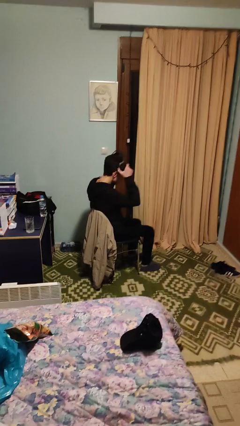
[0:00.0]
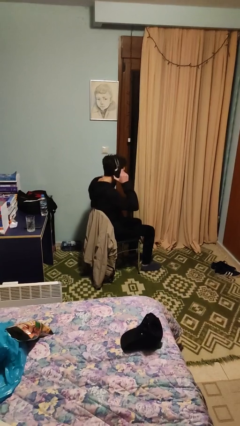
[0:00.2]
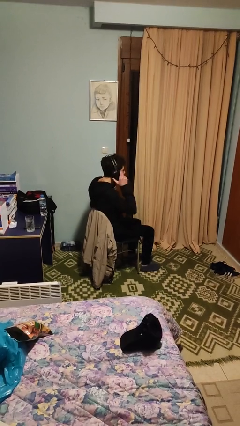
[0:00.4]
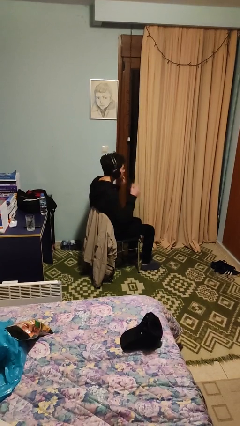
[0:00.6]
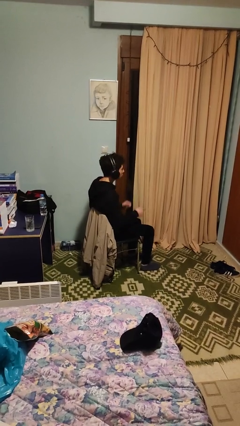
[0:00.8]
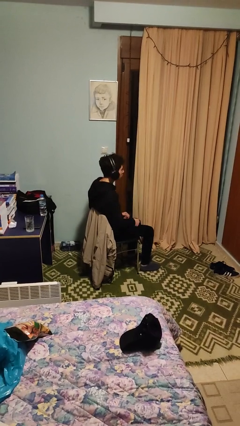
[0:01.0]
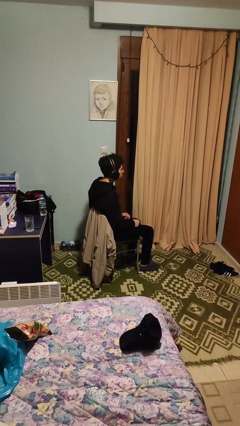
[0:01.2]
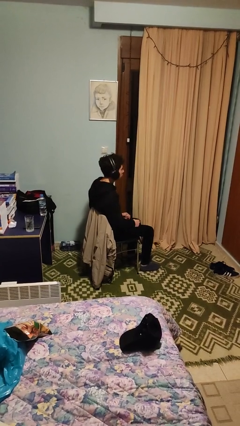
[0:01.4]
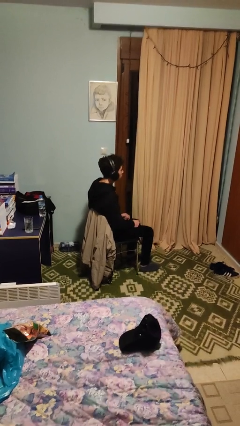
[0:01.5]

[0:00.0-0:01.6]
person puts on headphones

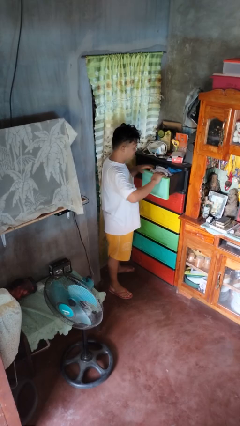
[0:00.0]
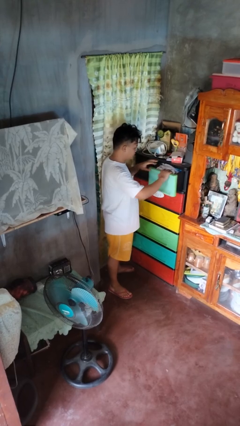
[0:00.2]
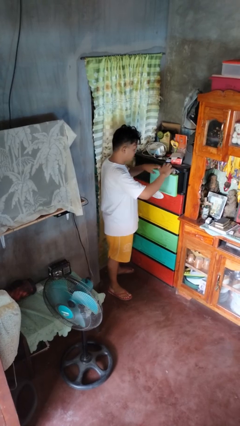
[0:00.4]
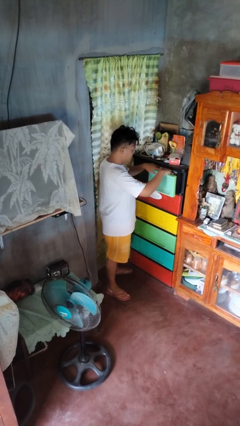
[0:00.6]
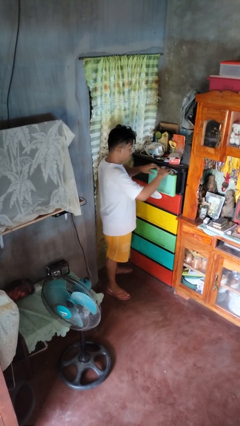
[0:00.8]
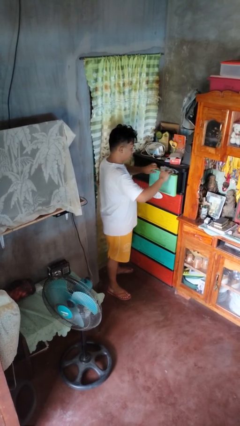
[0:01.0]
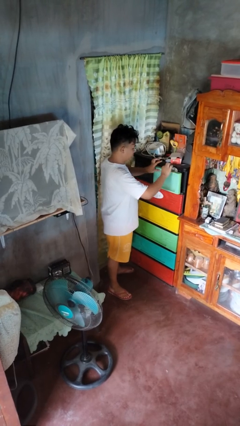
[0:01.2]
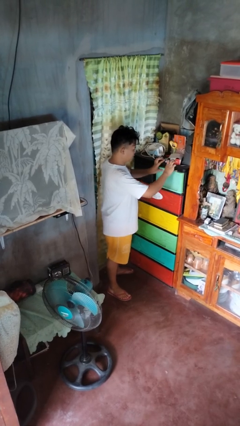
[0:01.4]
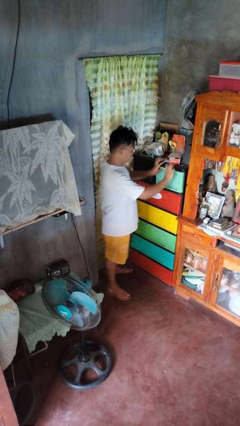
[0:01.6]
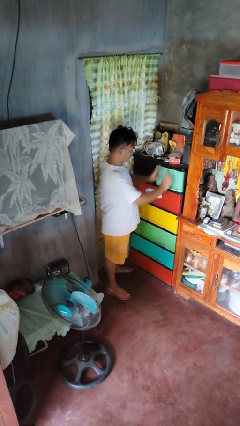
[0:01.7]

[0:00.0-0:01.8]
person closes dresser drawer

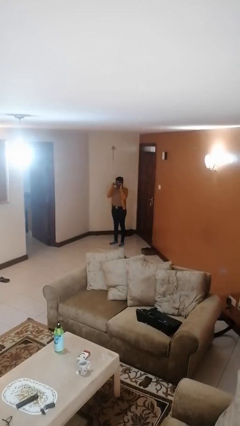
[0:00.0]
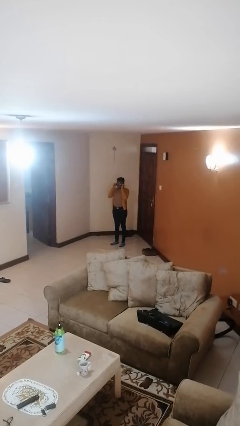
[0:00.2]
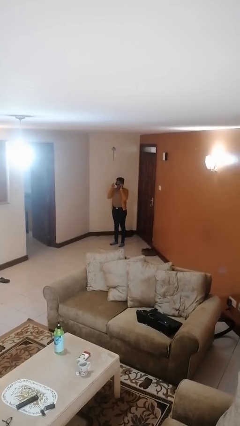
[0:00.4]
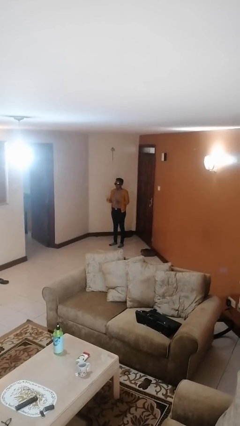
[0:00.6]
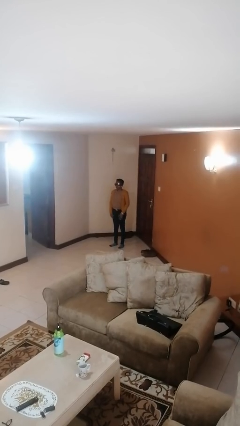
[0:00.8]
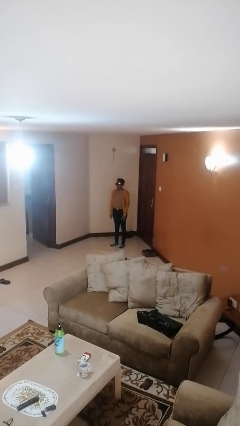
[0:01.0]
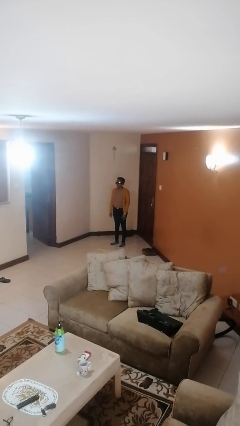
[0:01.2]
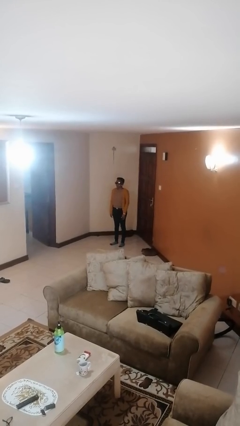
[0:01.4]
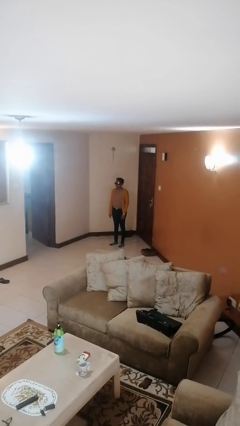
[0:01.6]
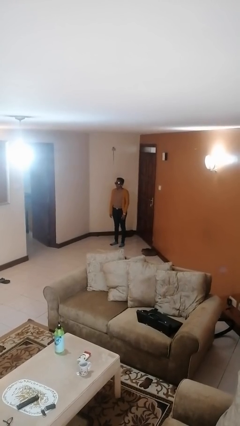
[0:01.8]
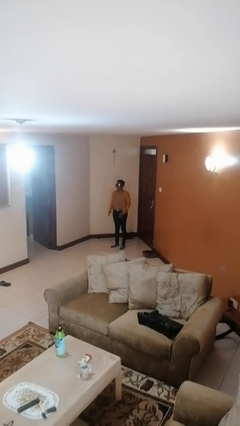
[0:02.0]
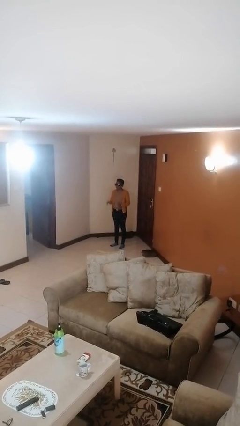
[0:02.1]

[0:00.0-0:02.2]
person puts on sunglasses

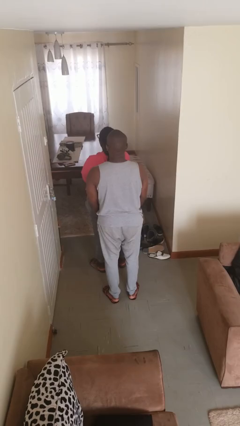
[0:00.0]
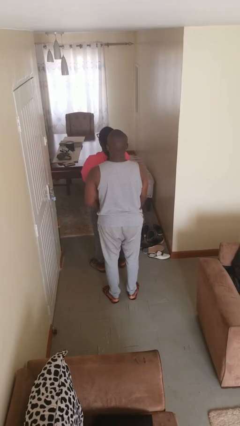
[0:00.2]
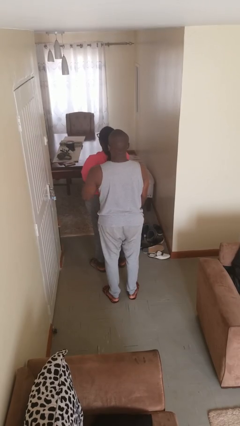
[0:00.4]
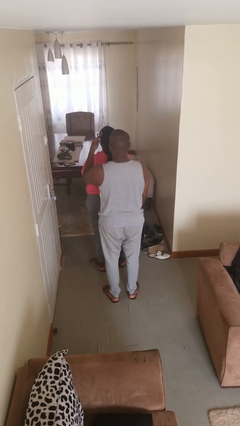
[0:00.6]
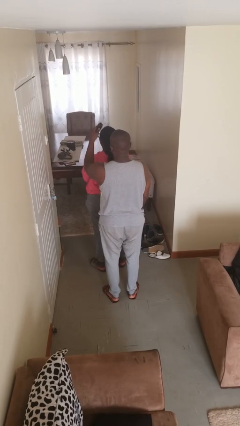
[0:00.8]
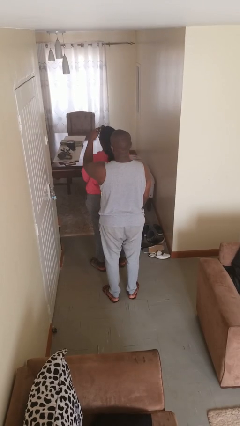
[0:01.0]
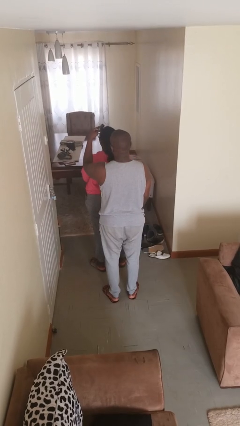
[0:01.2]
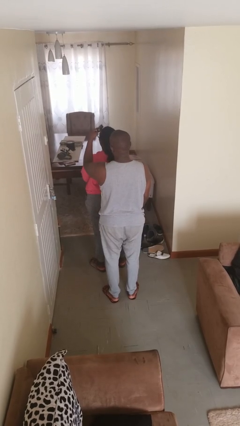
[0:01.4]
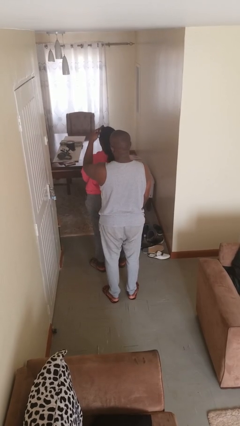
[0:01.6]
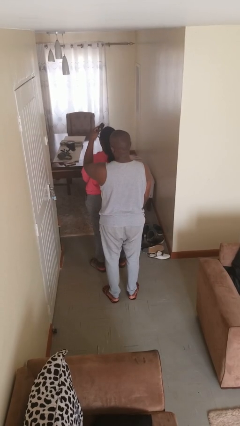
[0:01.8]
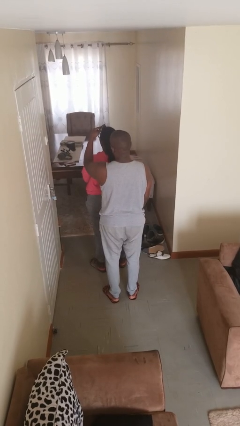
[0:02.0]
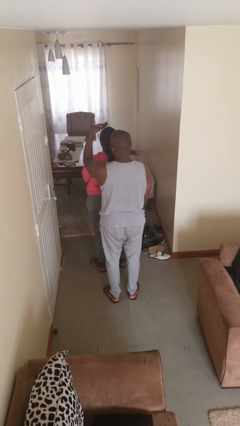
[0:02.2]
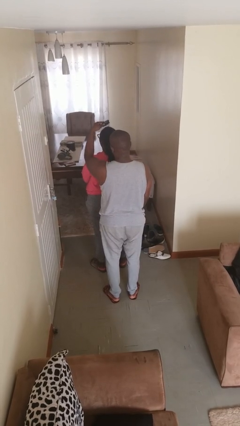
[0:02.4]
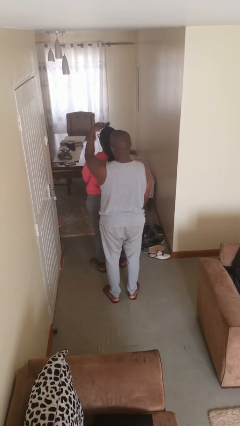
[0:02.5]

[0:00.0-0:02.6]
person brushes hair of person

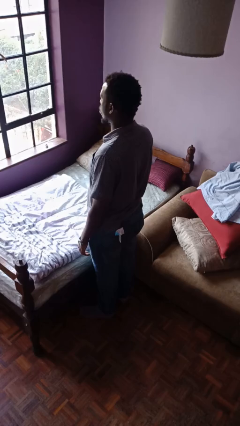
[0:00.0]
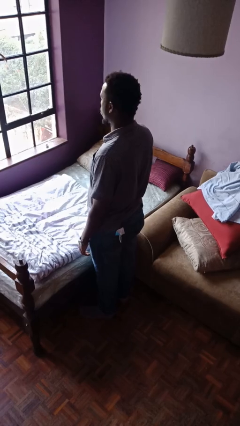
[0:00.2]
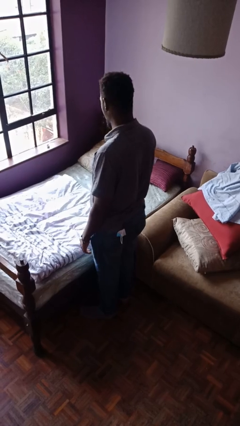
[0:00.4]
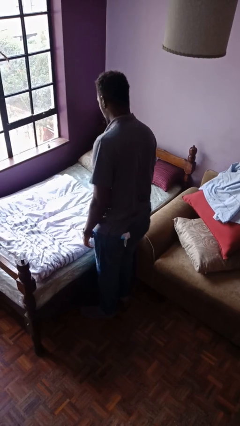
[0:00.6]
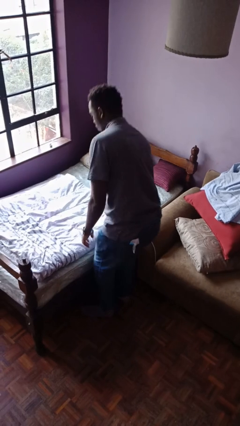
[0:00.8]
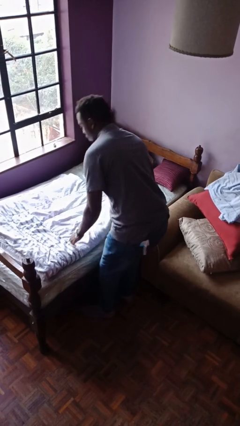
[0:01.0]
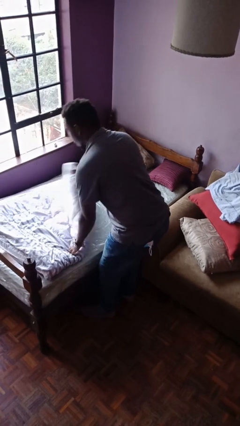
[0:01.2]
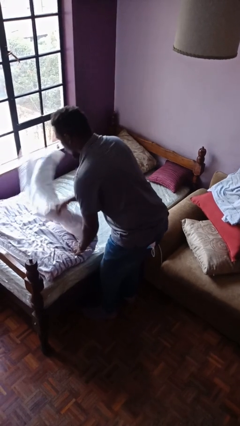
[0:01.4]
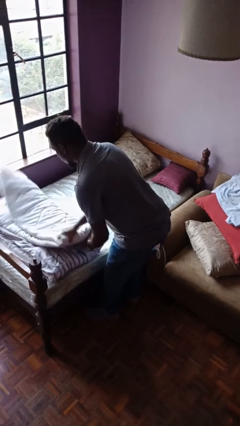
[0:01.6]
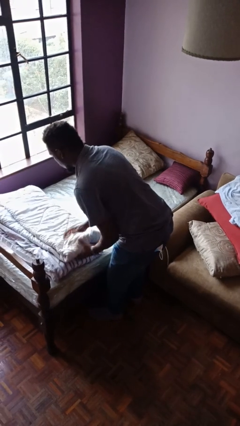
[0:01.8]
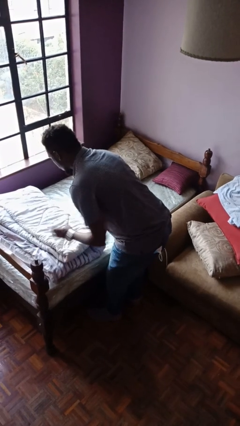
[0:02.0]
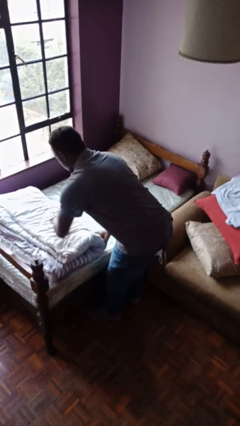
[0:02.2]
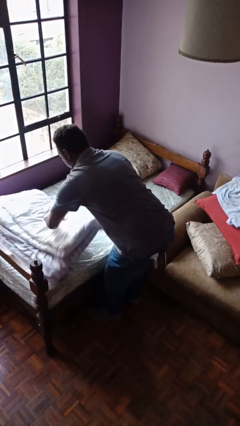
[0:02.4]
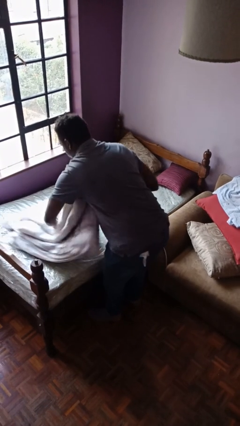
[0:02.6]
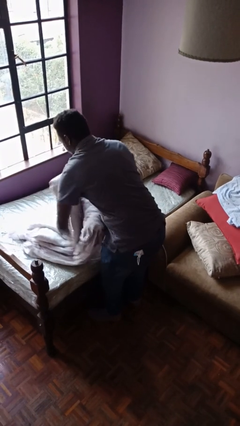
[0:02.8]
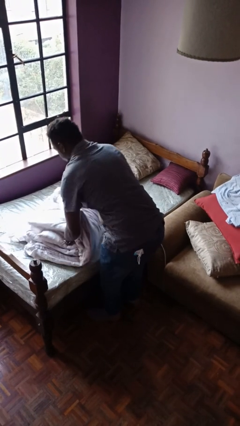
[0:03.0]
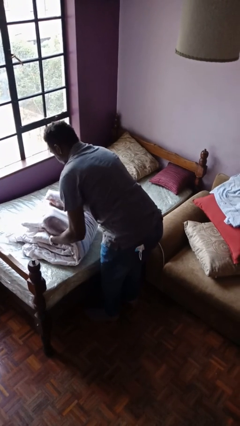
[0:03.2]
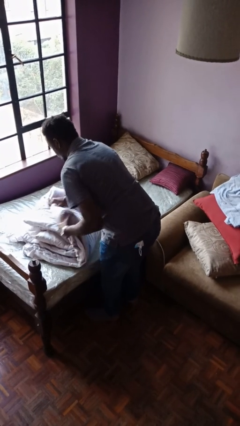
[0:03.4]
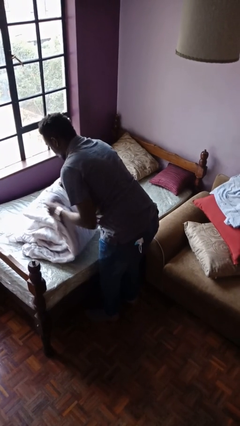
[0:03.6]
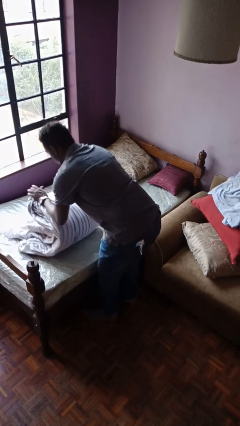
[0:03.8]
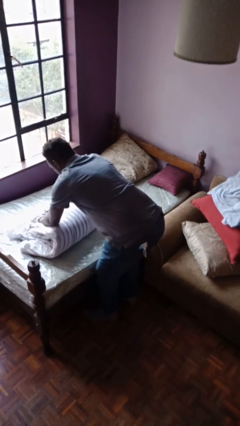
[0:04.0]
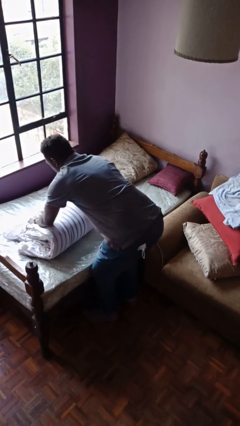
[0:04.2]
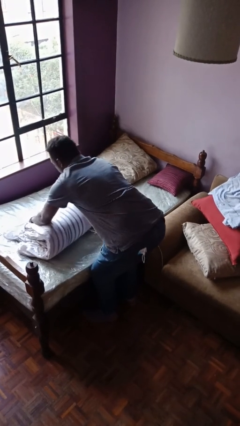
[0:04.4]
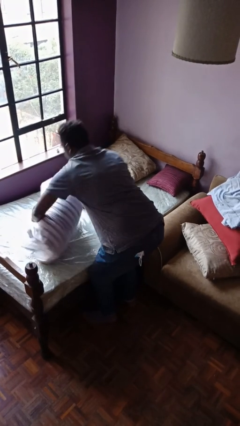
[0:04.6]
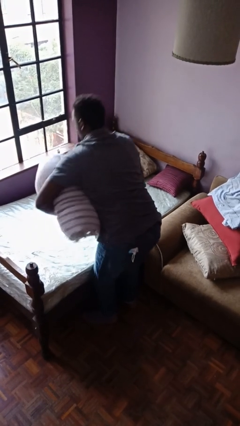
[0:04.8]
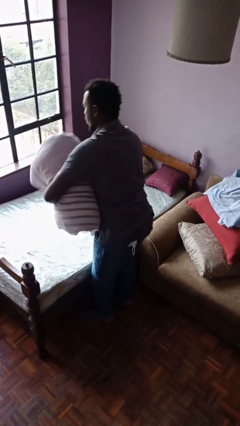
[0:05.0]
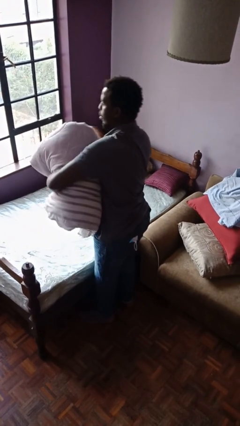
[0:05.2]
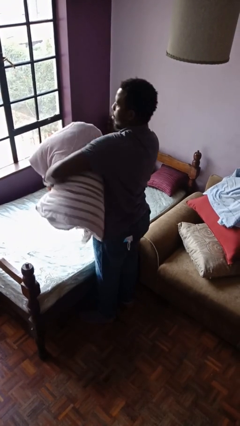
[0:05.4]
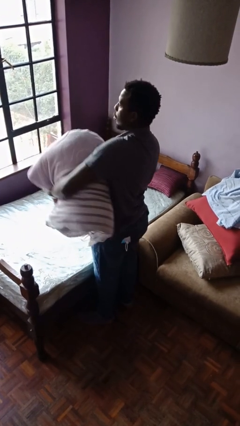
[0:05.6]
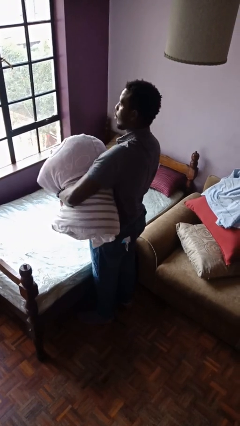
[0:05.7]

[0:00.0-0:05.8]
person folds blanket

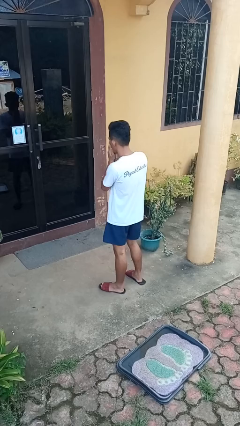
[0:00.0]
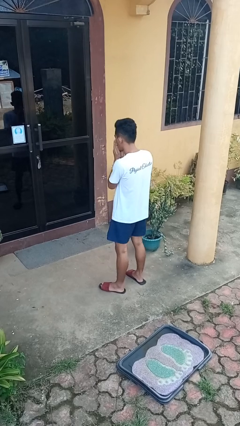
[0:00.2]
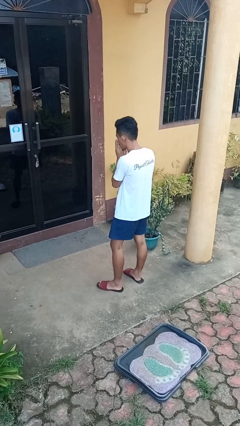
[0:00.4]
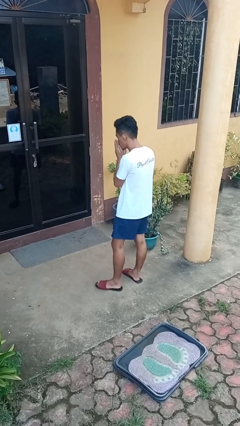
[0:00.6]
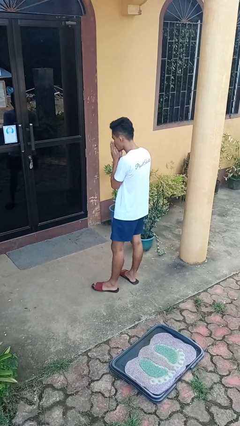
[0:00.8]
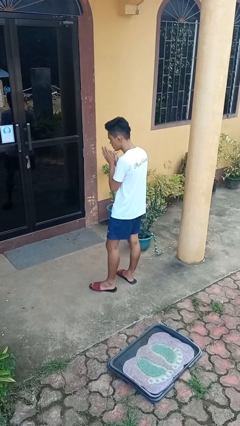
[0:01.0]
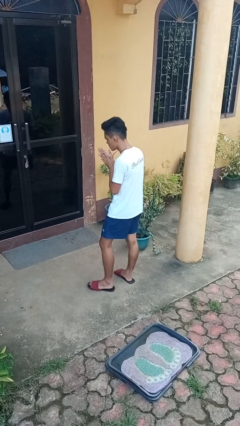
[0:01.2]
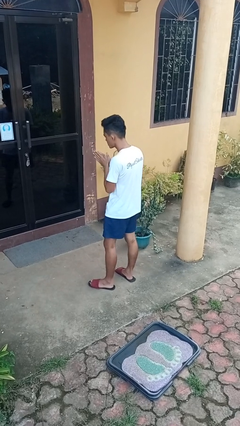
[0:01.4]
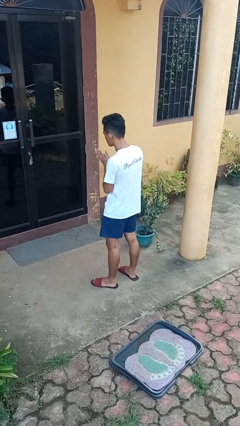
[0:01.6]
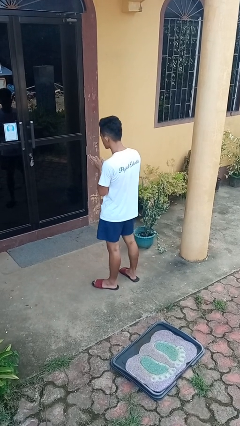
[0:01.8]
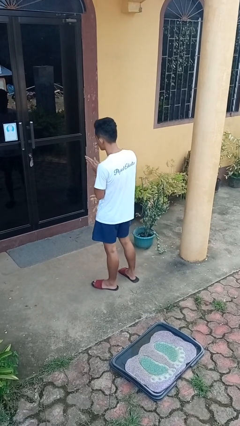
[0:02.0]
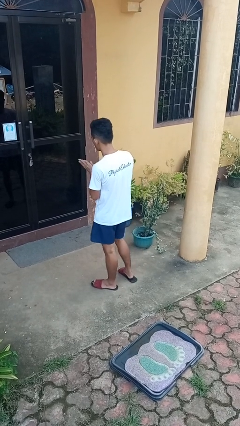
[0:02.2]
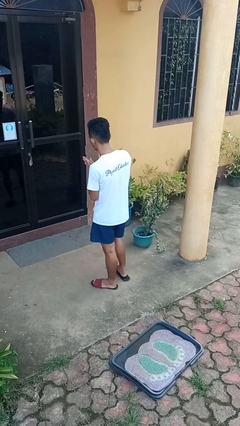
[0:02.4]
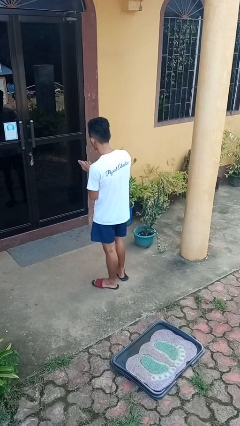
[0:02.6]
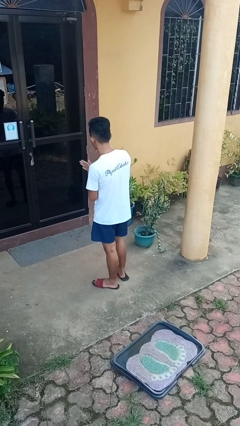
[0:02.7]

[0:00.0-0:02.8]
person blows into hands

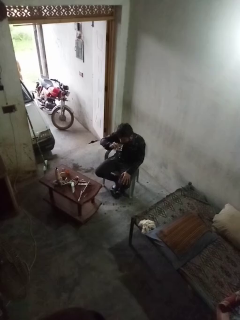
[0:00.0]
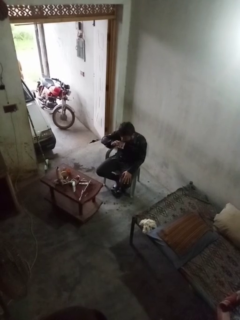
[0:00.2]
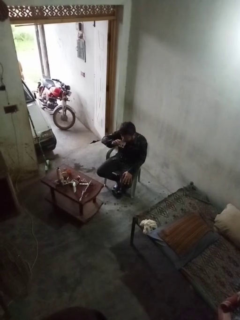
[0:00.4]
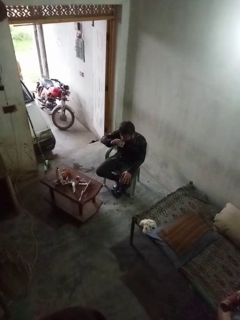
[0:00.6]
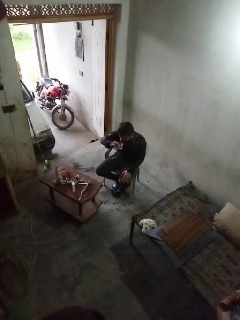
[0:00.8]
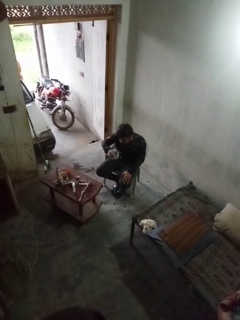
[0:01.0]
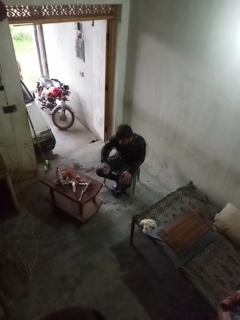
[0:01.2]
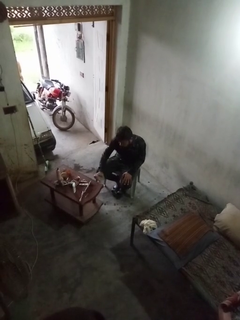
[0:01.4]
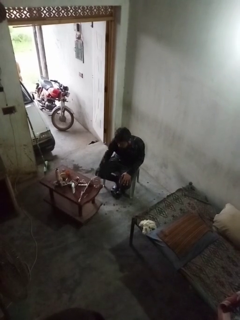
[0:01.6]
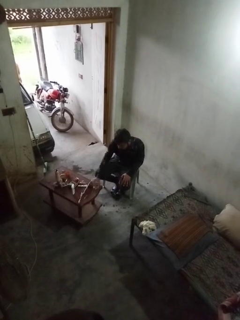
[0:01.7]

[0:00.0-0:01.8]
person drinks from shotglass
